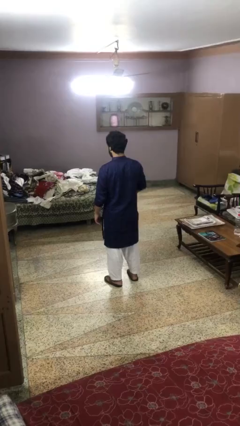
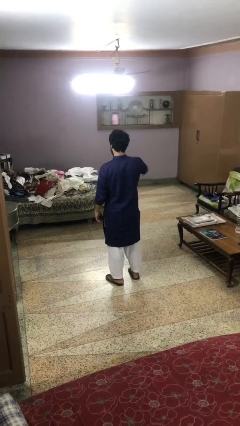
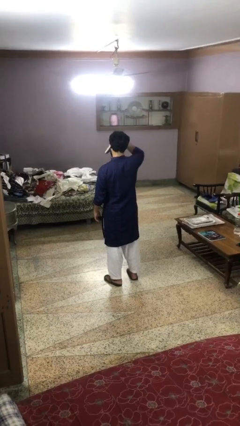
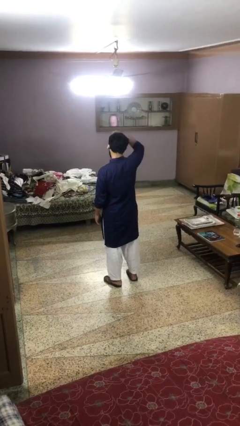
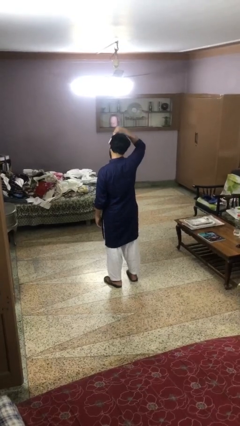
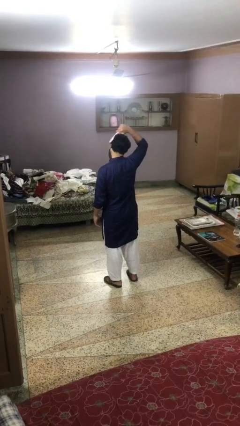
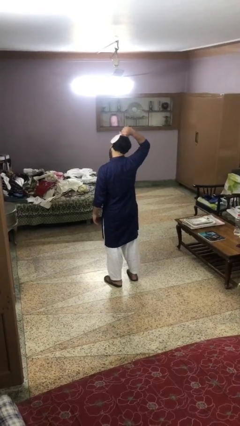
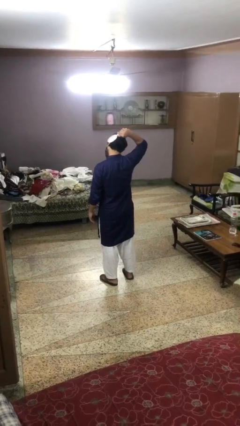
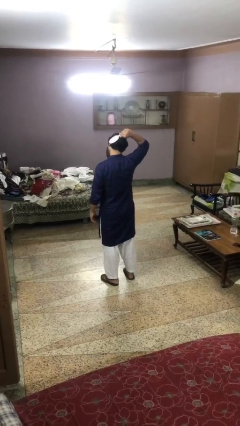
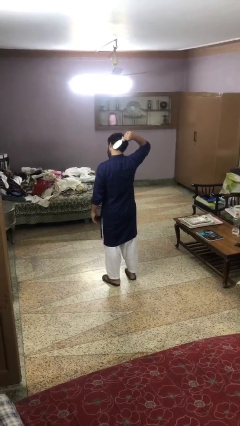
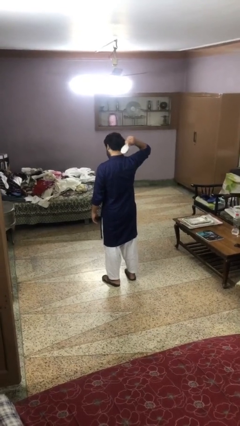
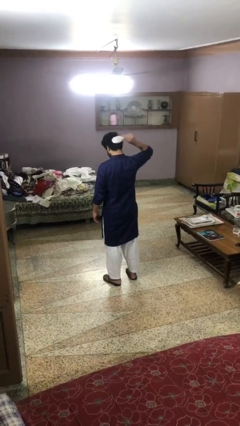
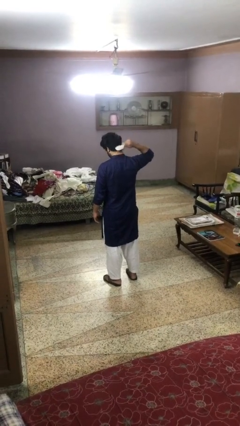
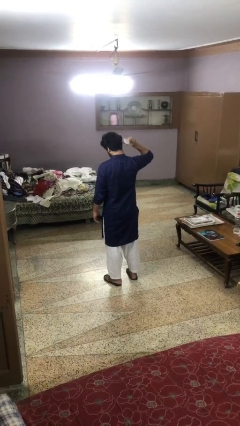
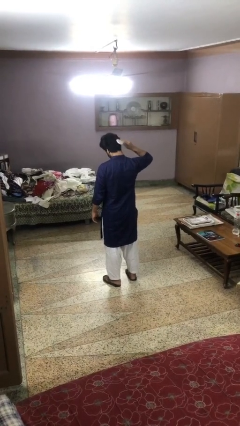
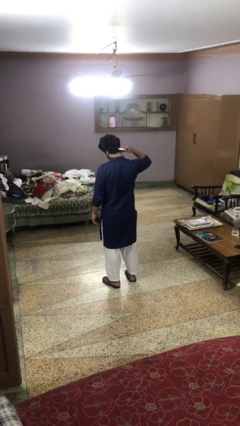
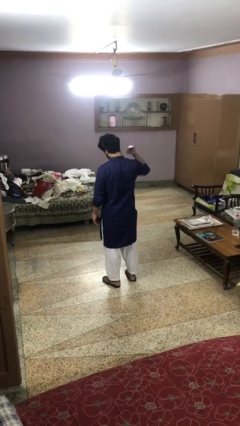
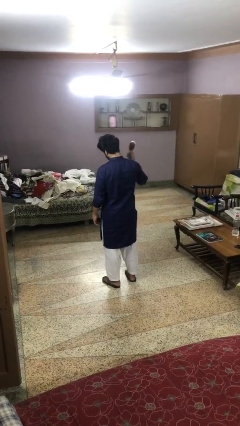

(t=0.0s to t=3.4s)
person brushes hair

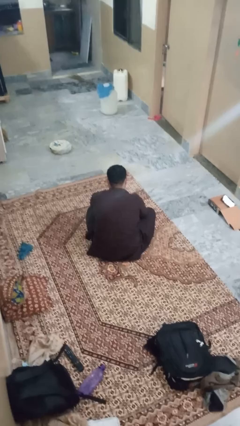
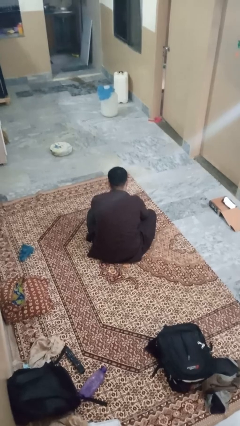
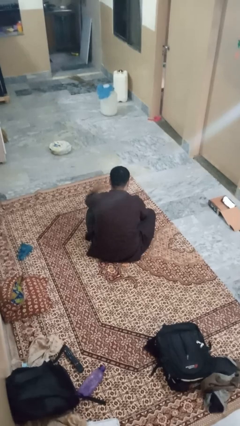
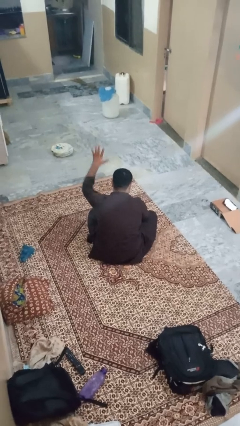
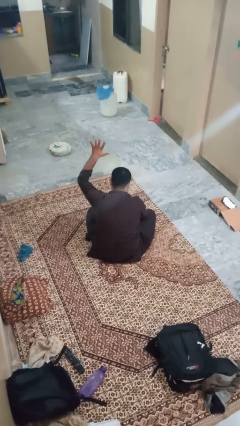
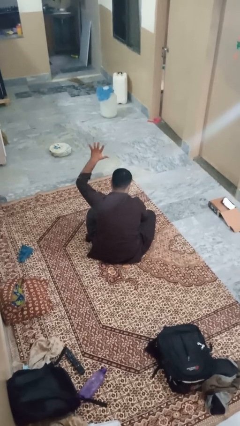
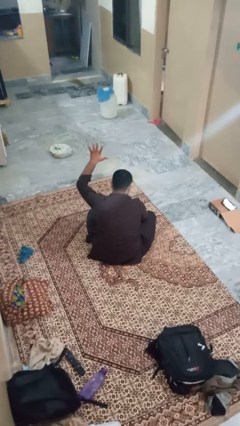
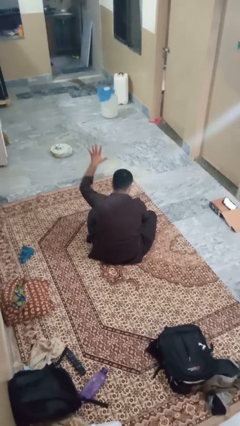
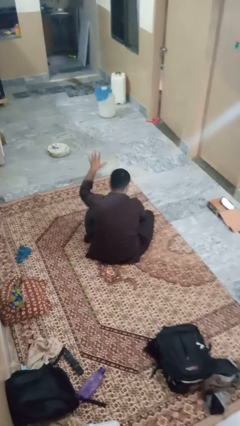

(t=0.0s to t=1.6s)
person gestures number five

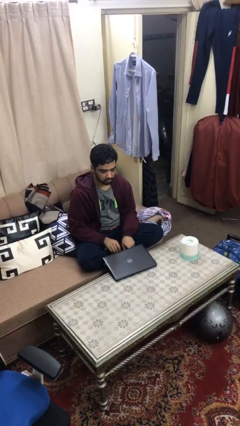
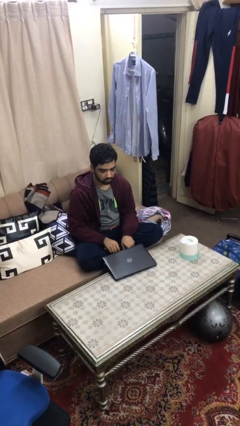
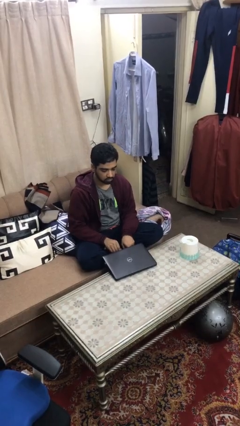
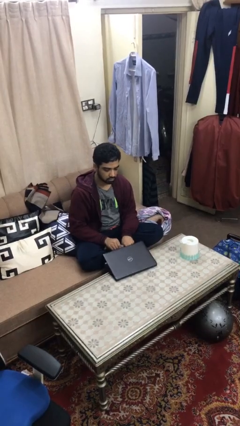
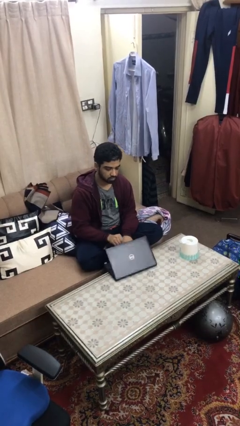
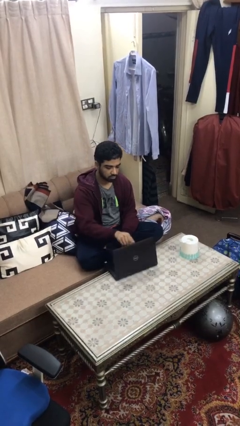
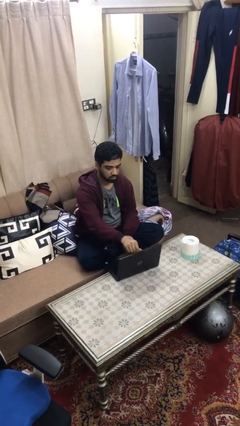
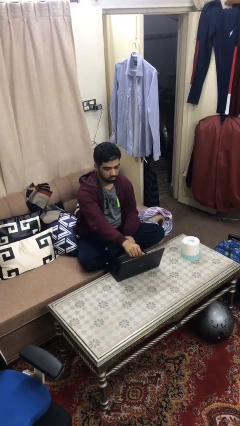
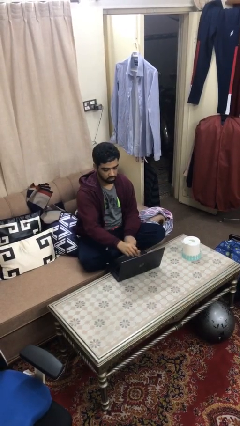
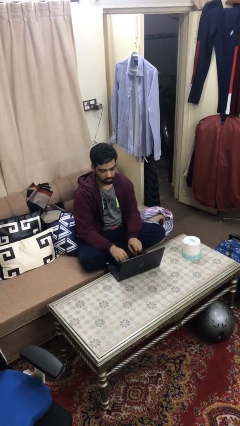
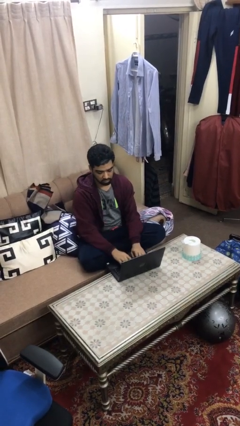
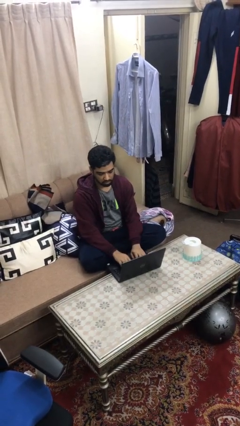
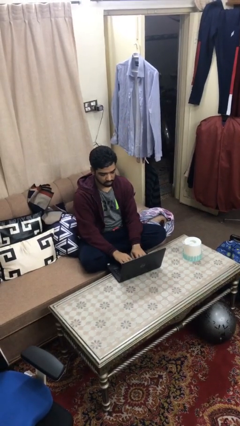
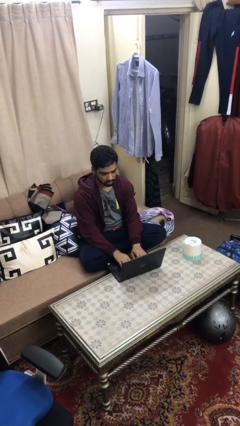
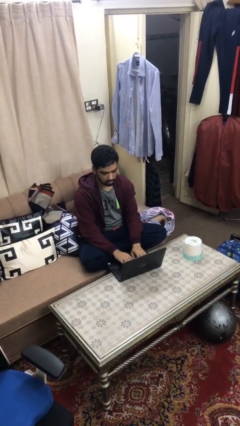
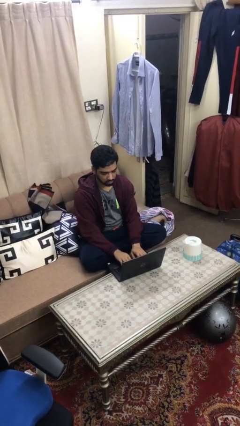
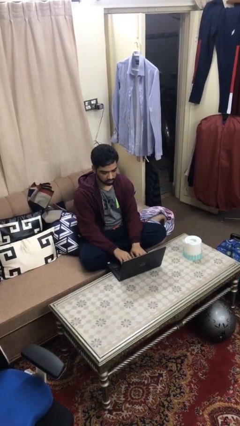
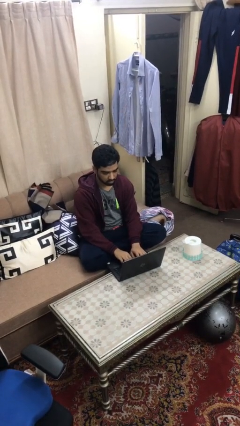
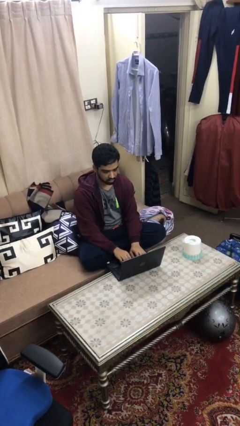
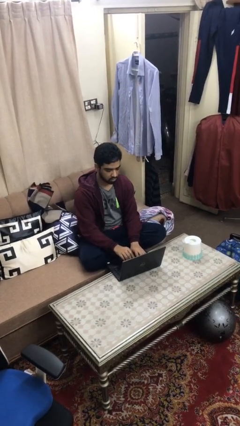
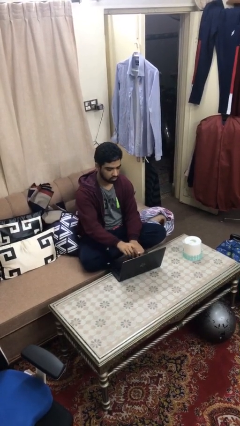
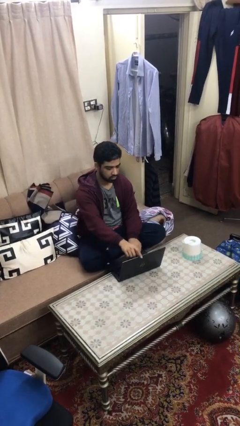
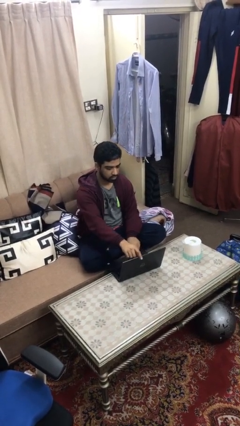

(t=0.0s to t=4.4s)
person interacts with laptop

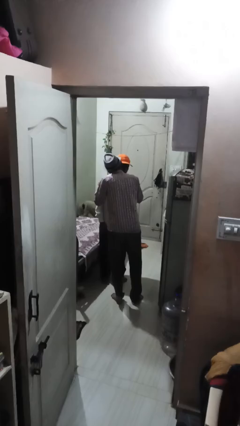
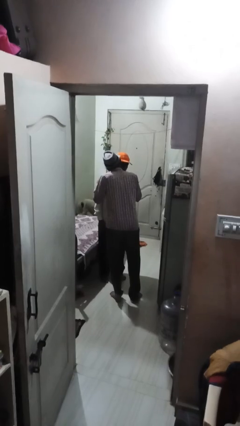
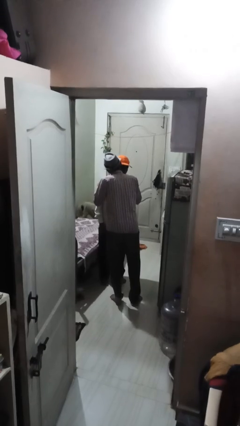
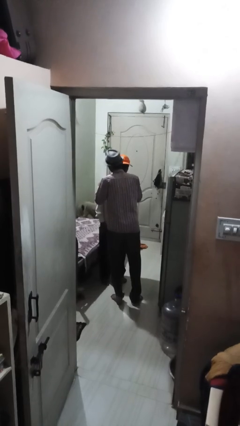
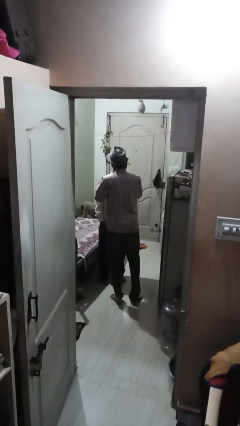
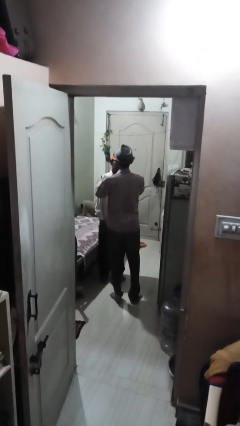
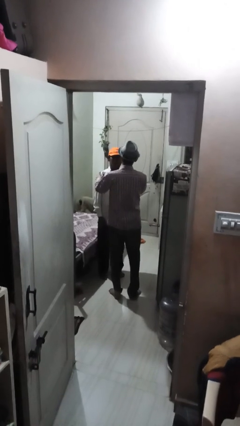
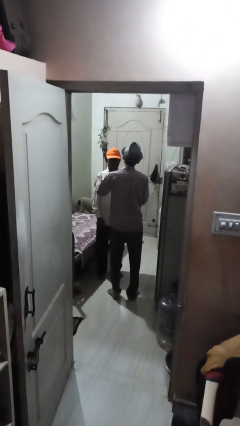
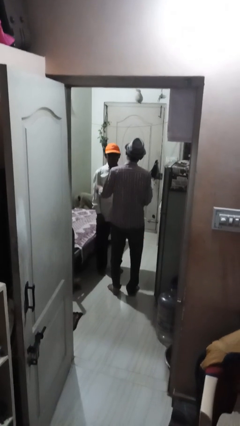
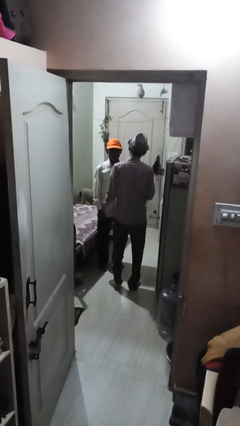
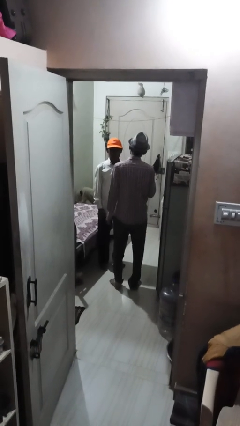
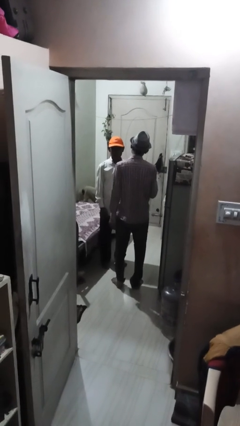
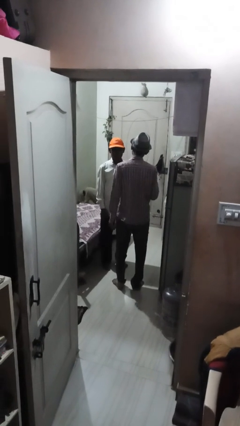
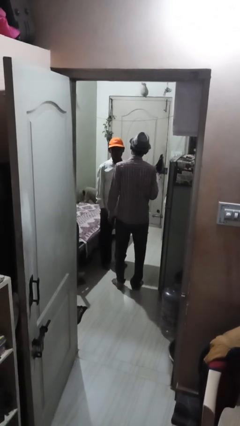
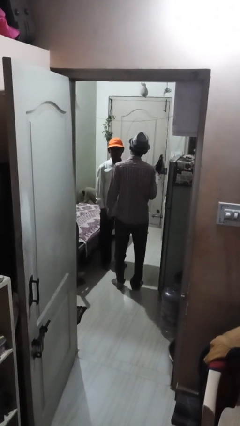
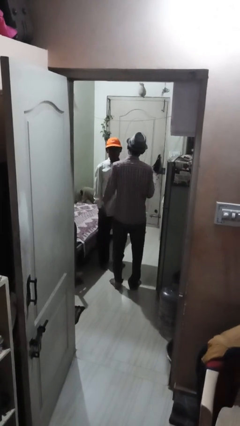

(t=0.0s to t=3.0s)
person kisses cheek of person

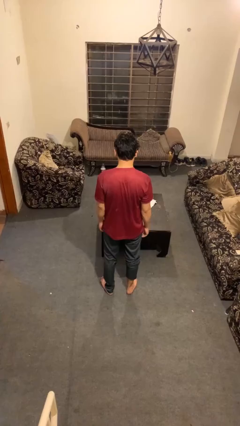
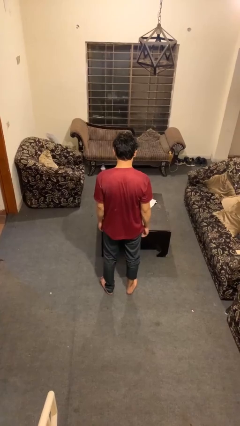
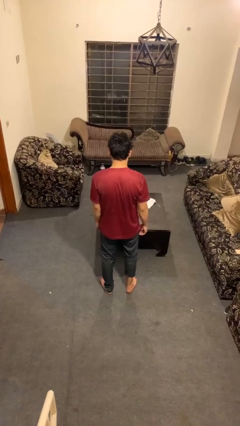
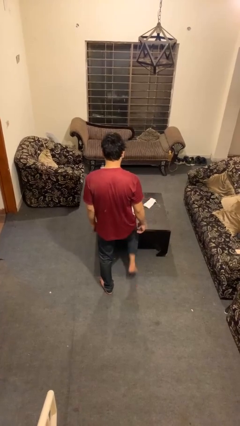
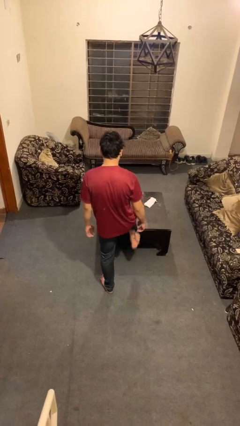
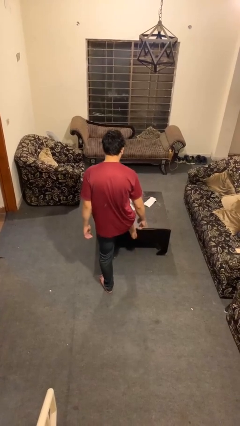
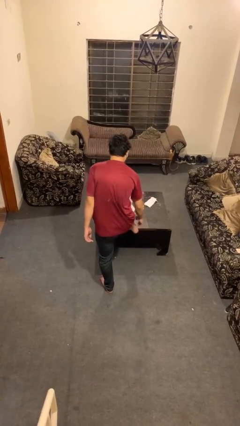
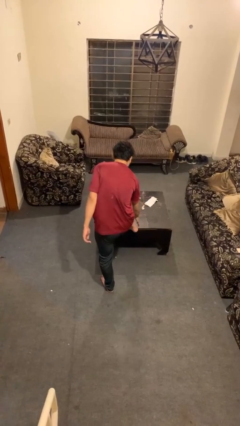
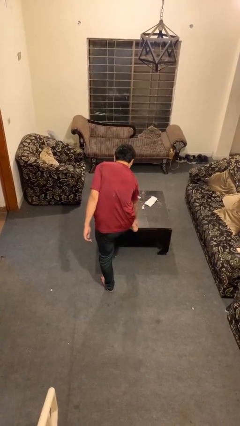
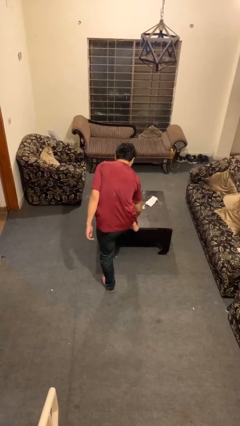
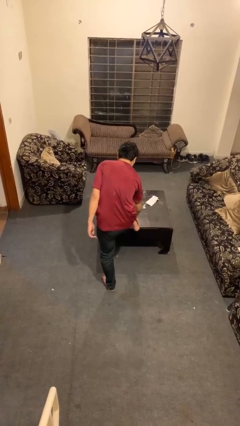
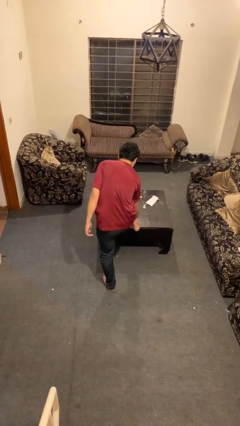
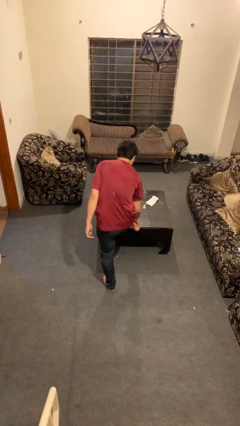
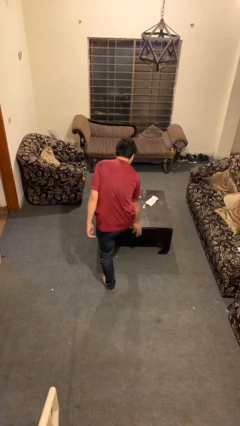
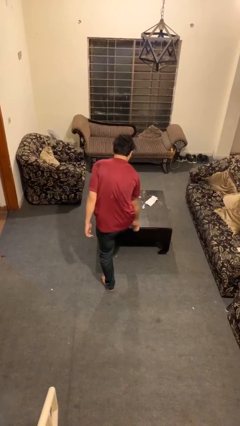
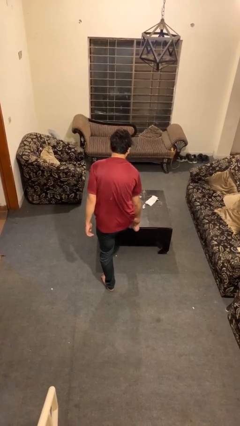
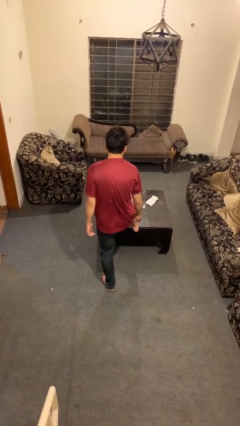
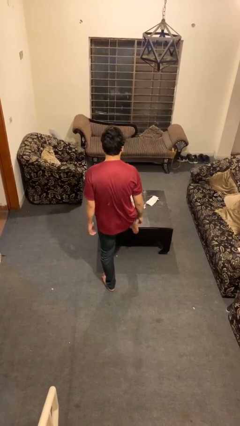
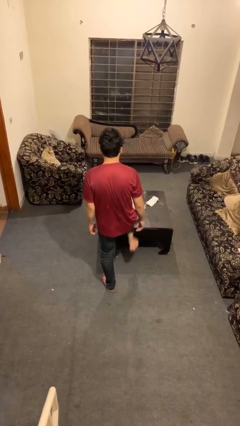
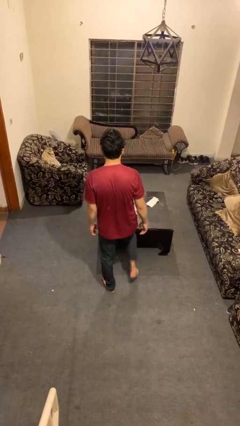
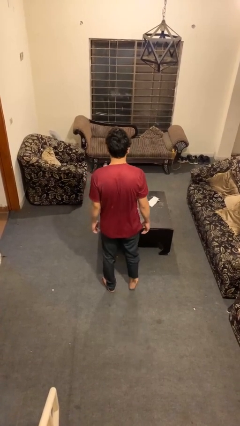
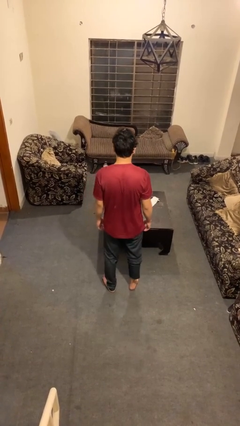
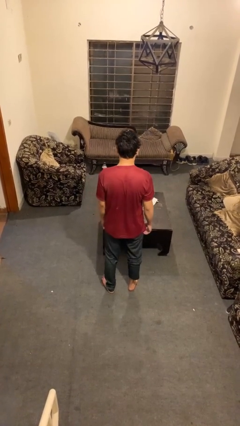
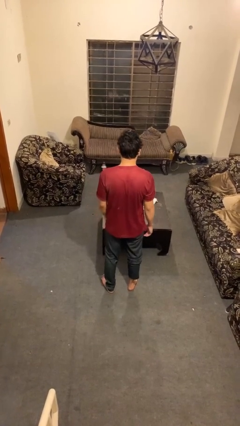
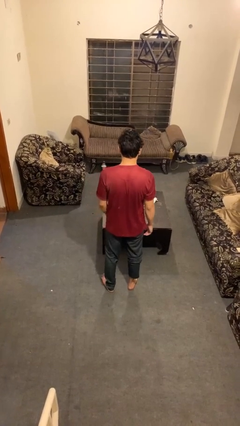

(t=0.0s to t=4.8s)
person rubs foot

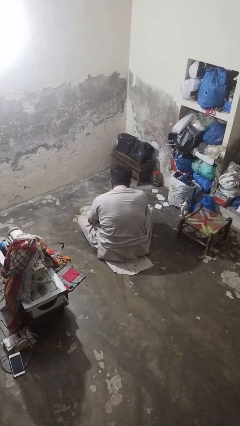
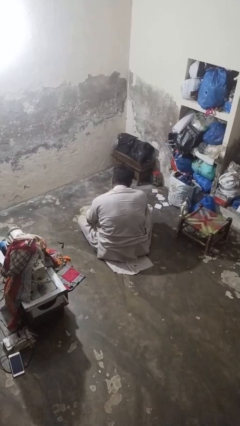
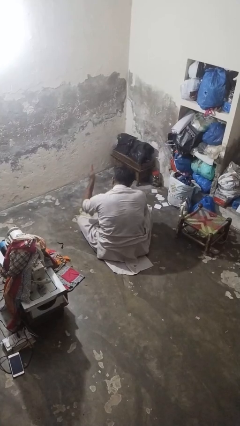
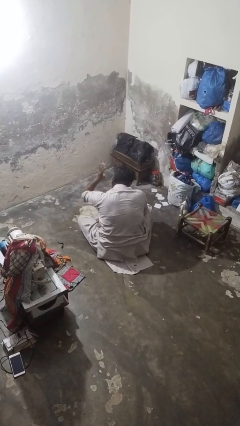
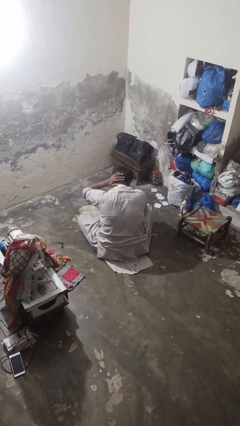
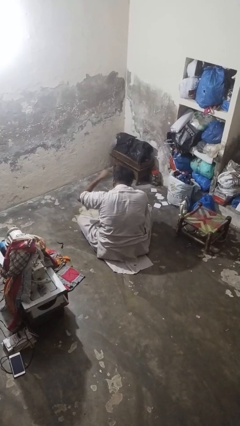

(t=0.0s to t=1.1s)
person swats bug
